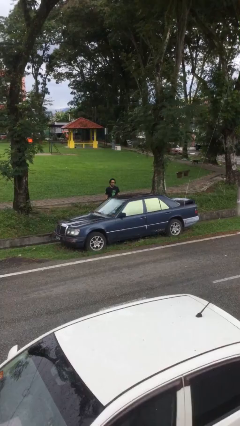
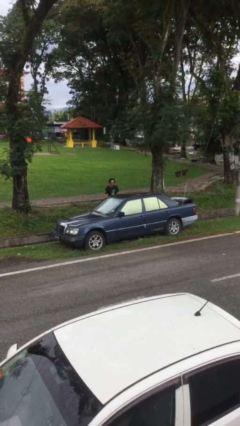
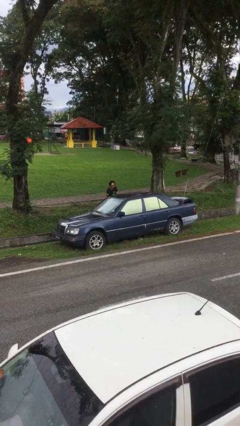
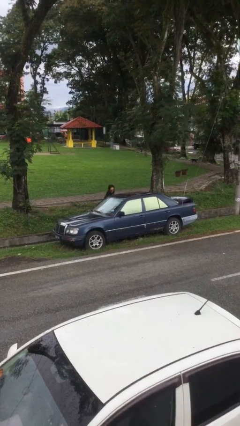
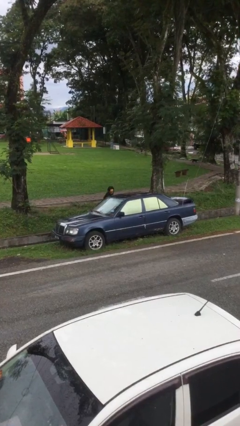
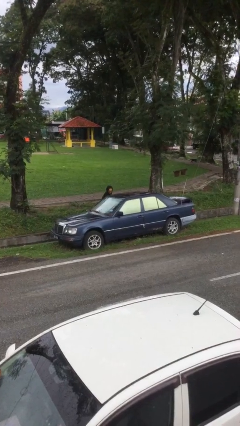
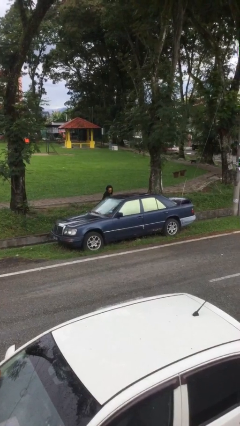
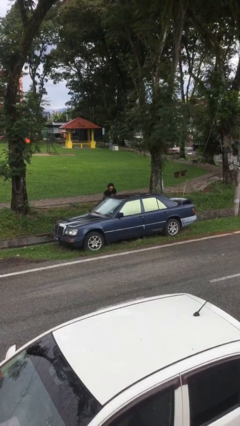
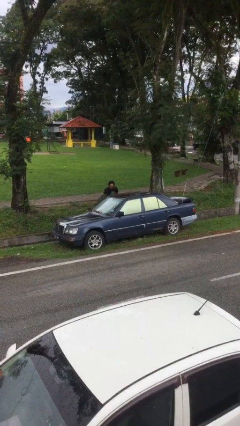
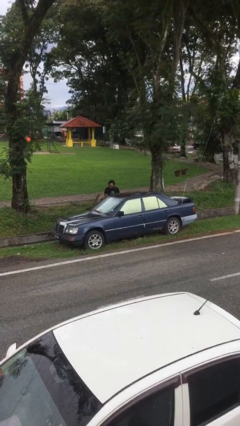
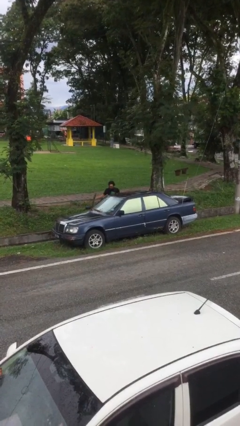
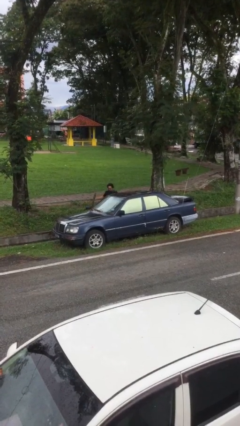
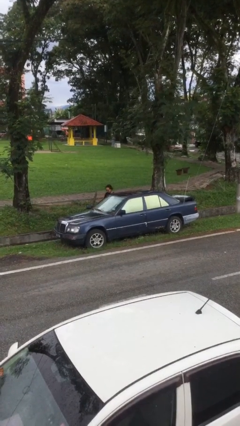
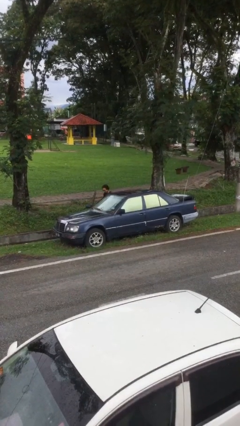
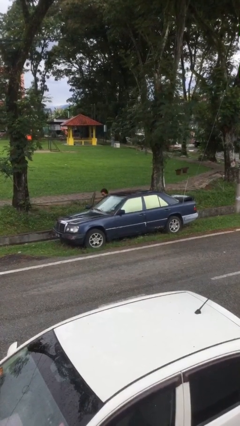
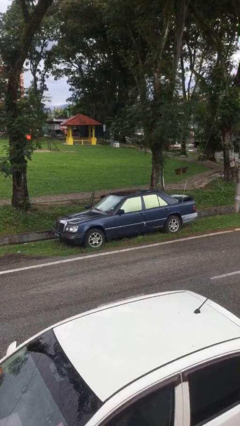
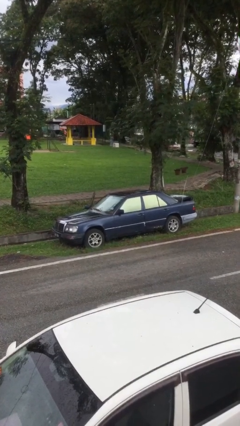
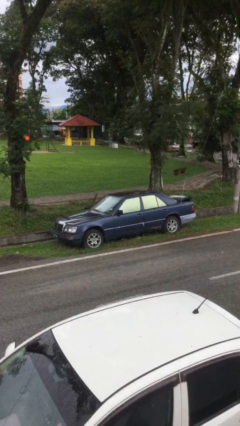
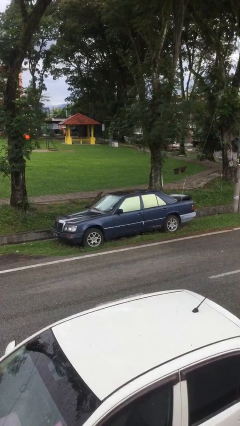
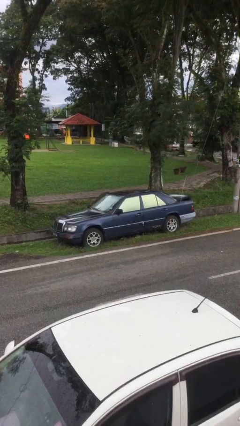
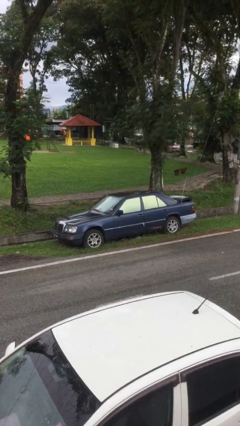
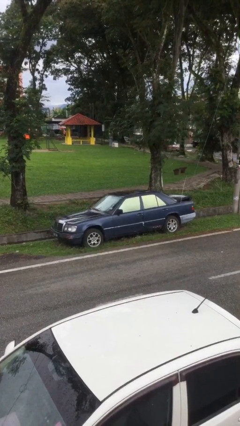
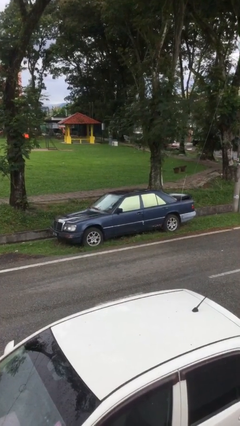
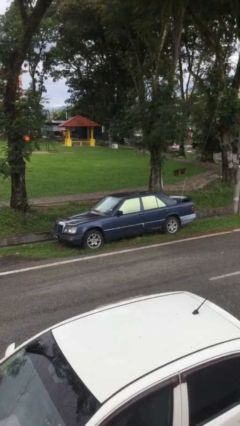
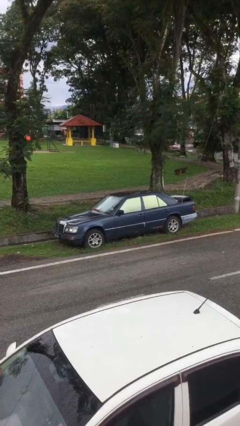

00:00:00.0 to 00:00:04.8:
car picks up person

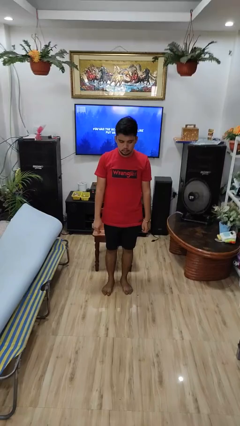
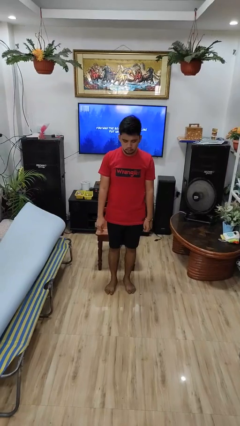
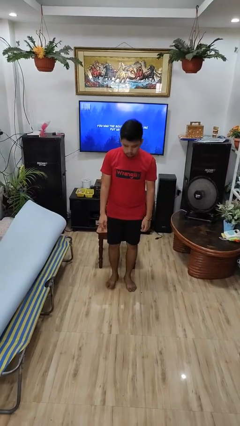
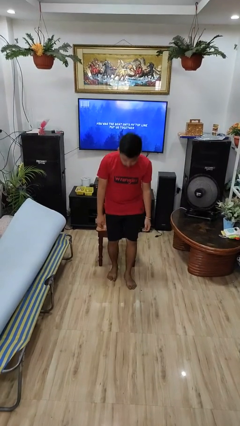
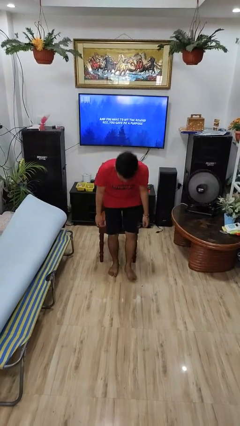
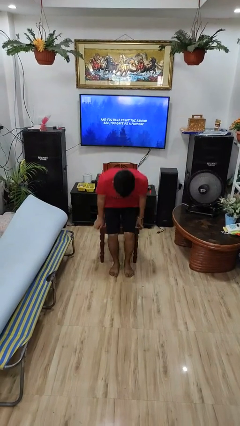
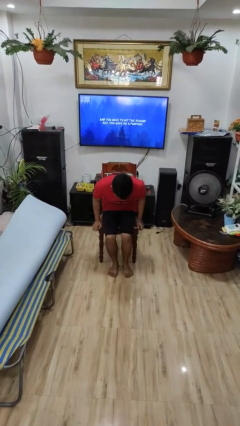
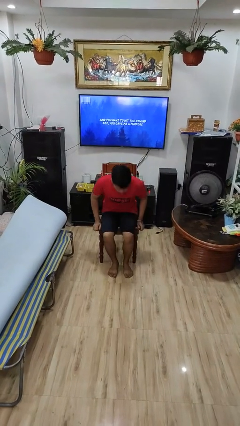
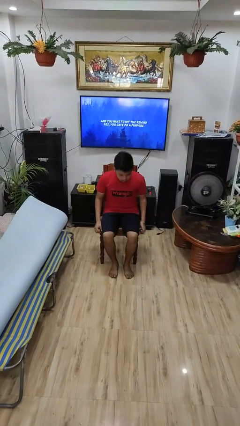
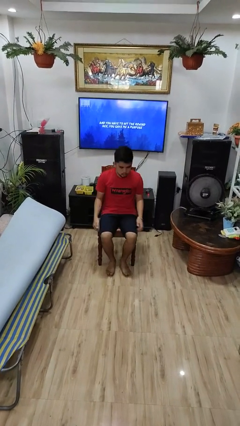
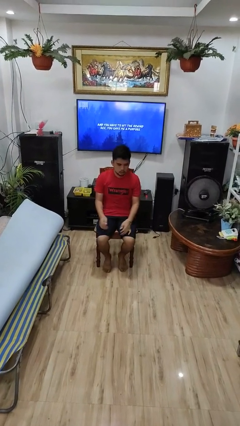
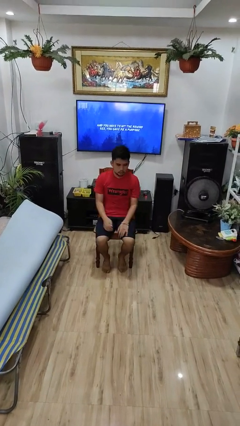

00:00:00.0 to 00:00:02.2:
person sits down

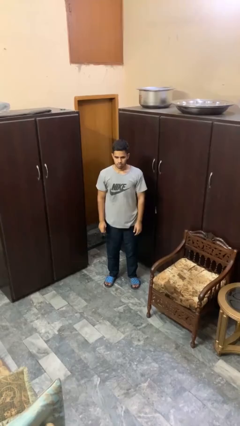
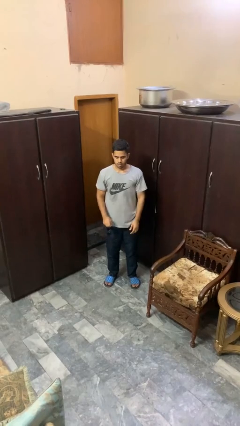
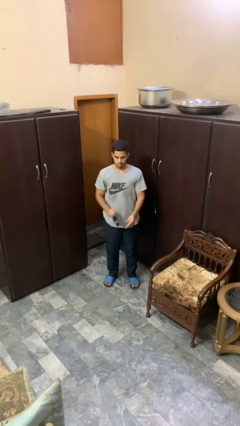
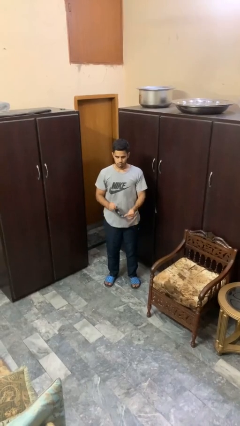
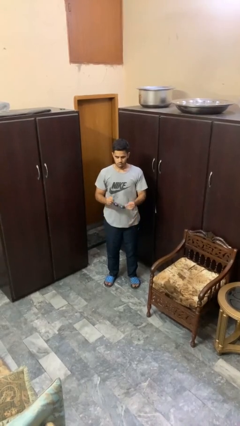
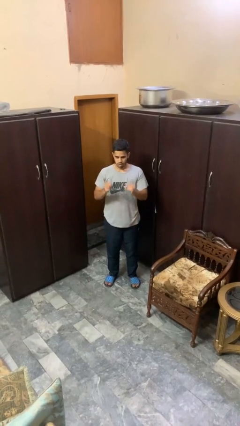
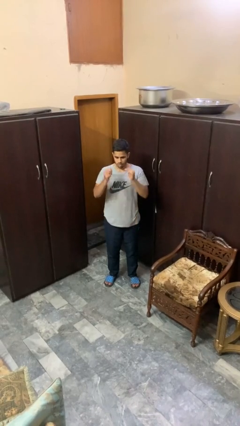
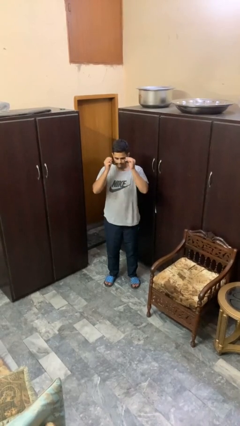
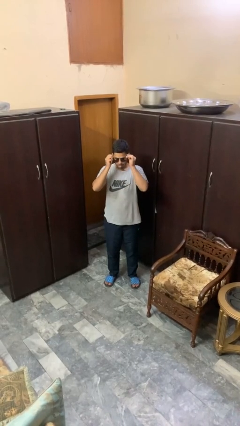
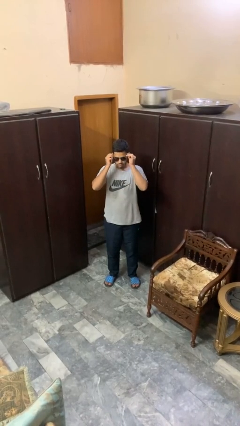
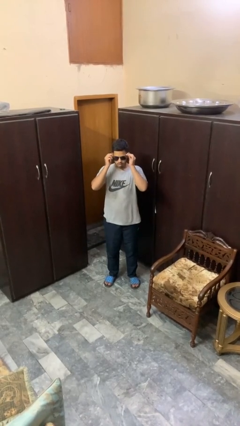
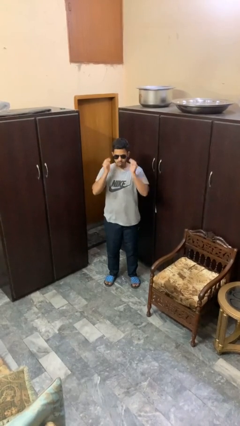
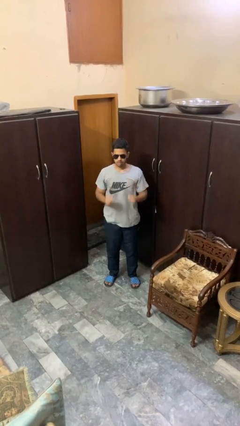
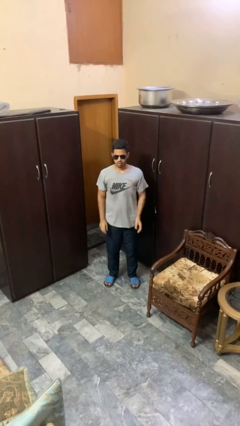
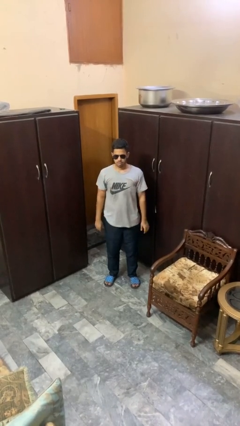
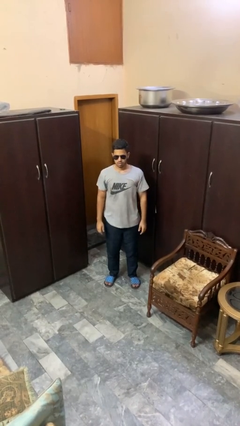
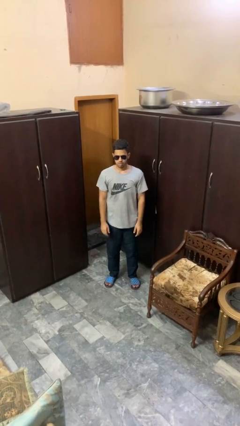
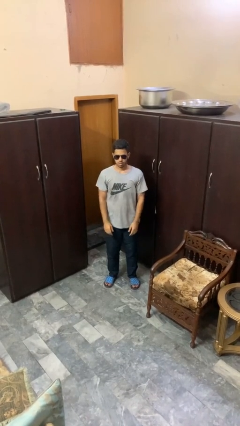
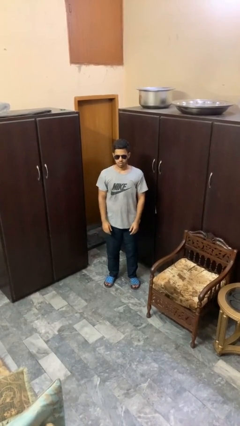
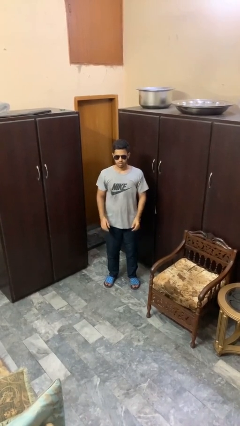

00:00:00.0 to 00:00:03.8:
person puts on sunglasses

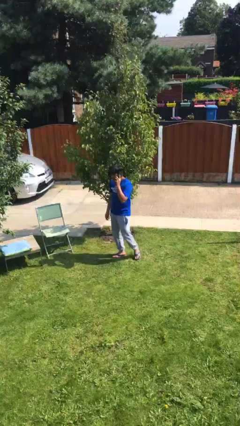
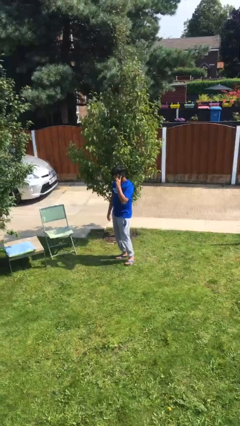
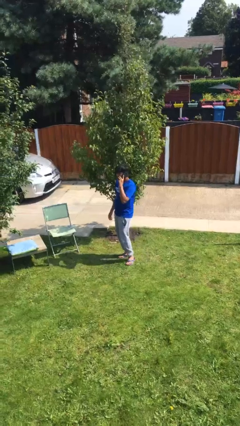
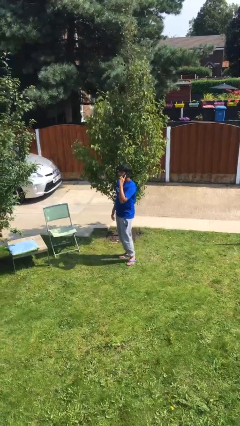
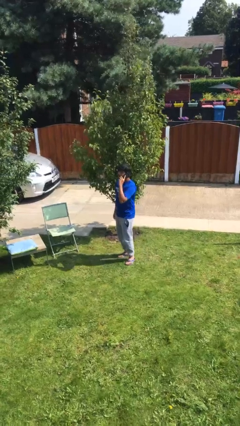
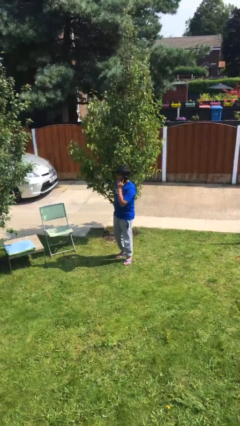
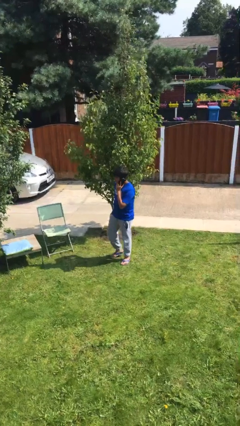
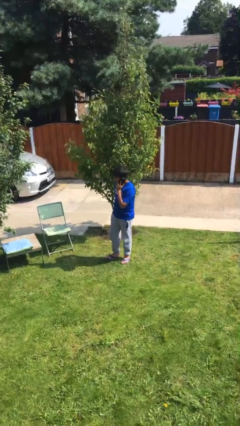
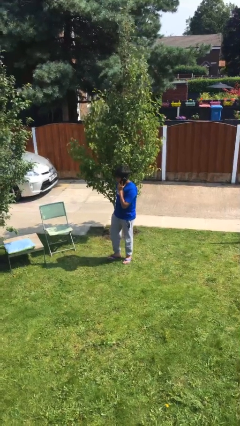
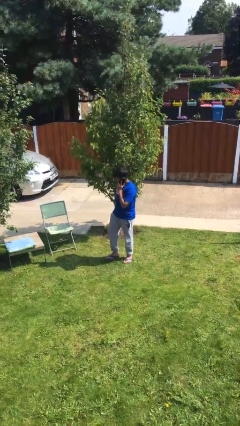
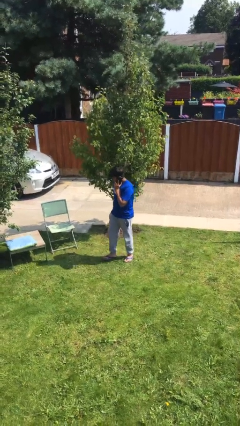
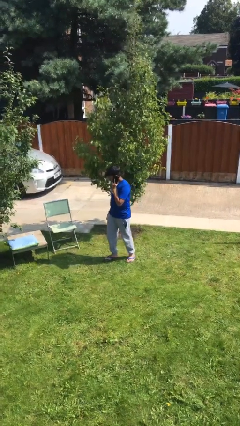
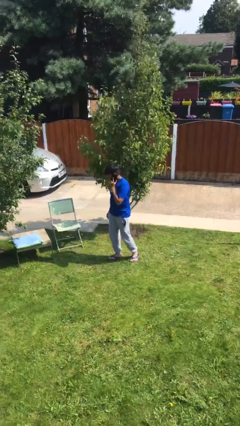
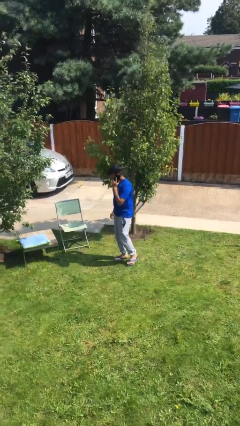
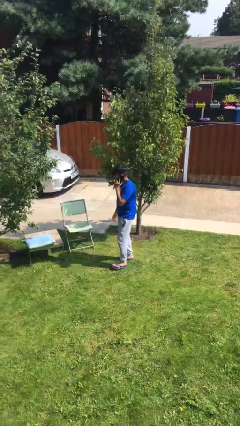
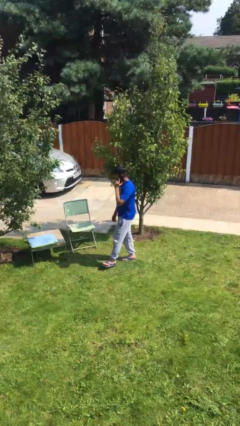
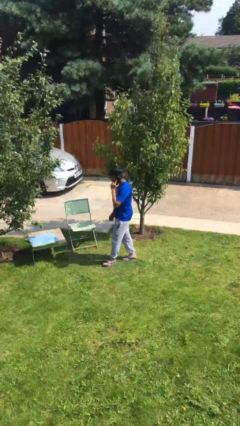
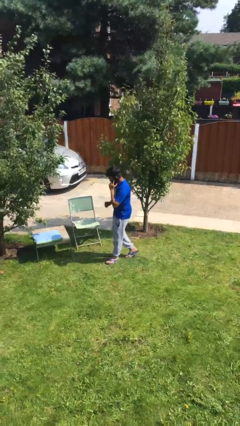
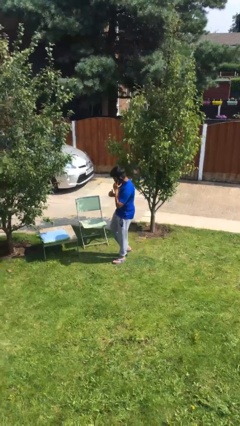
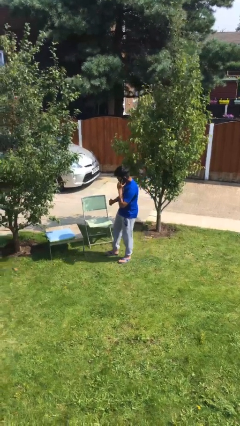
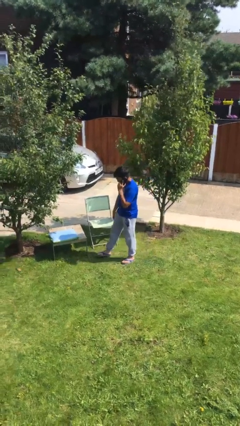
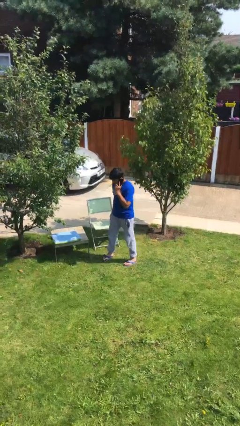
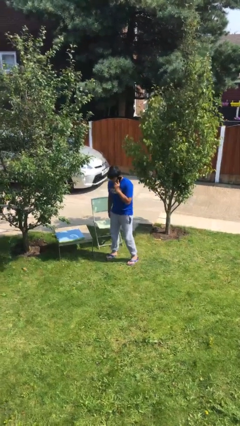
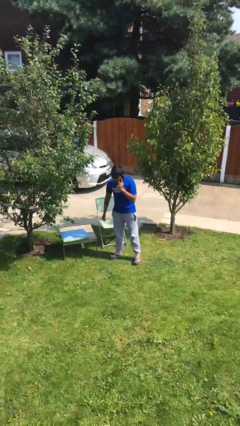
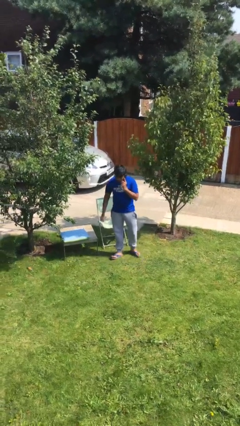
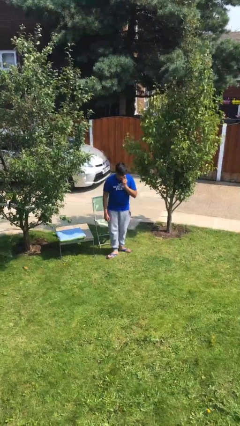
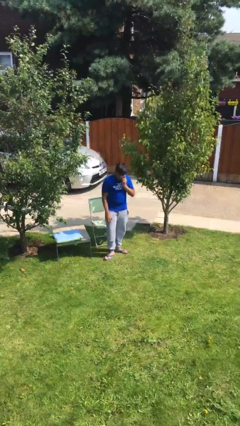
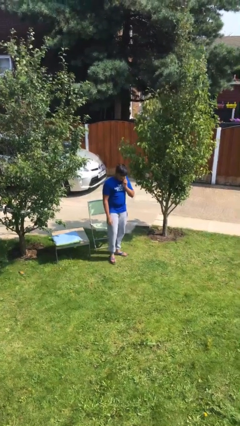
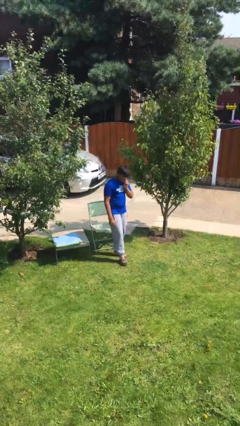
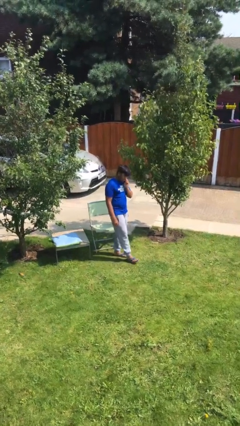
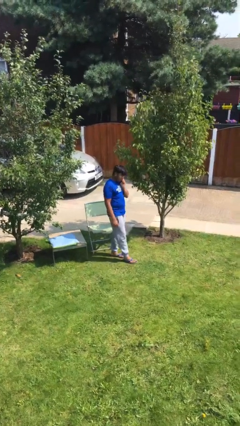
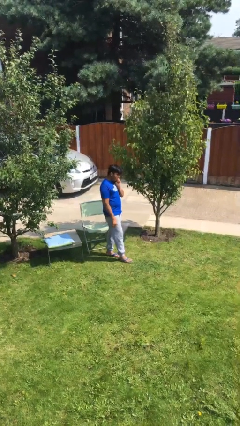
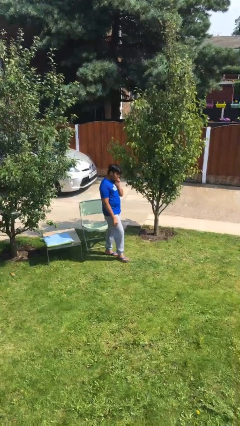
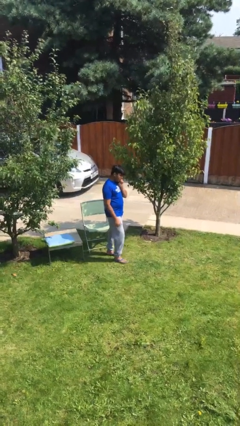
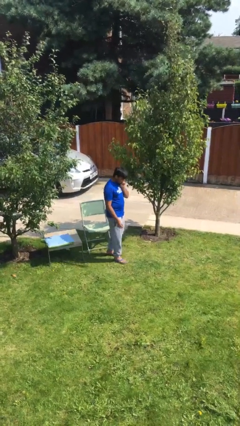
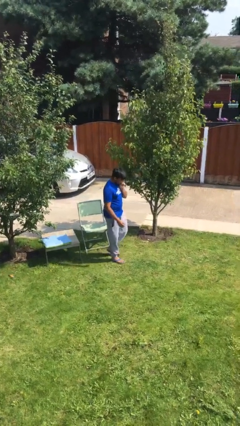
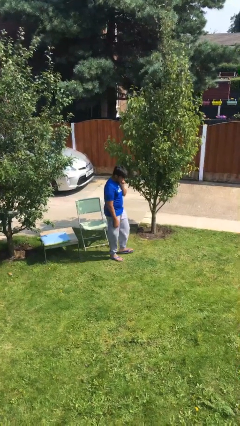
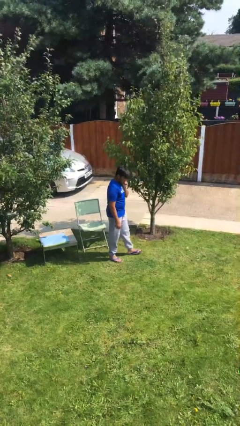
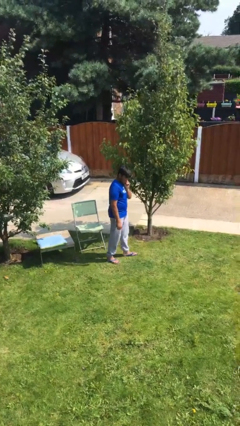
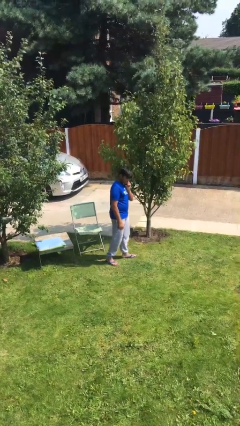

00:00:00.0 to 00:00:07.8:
person talks on phone
